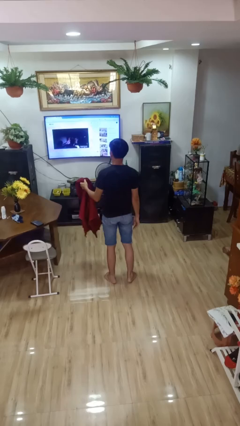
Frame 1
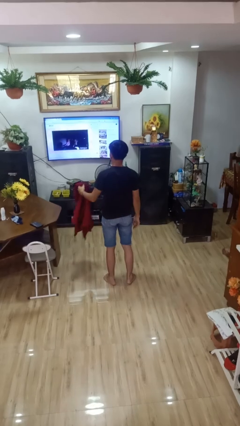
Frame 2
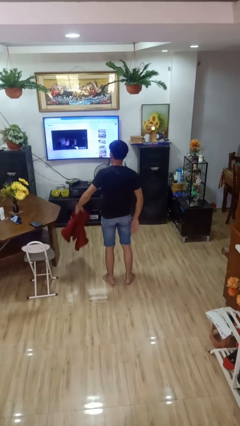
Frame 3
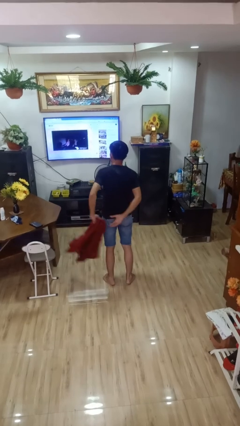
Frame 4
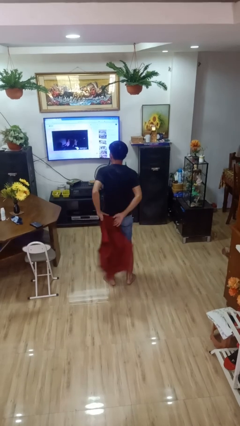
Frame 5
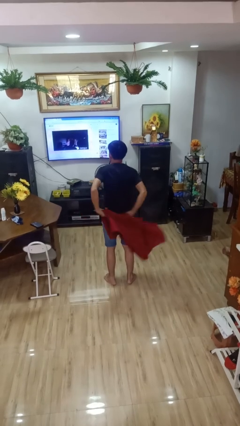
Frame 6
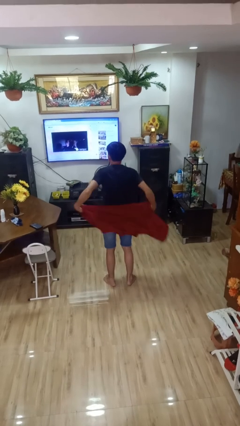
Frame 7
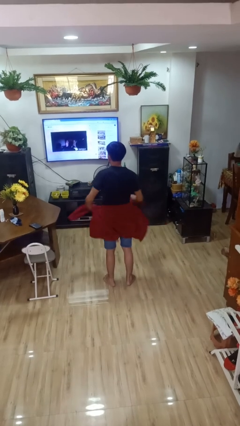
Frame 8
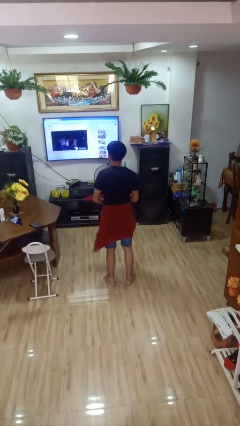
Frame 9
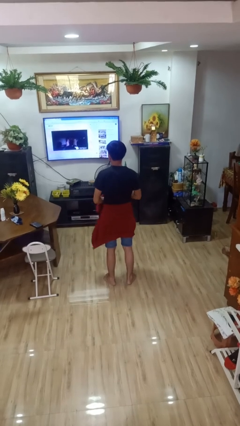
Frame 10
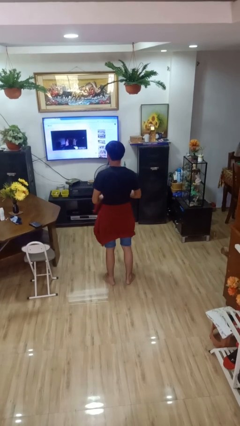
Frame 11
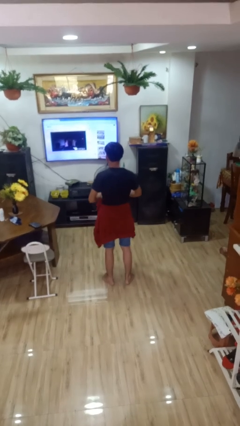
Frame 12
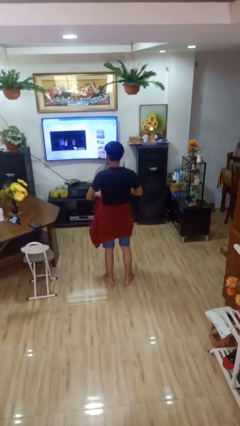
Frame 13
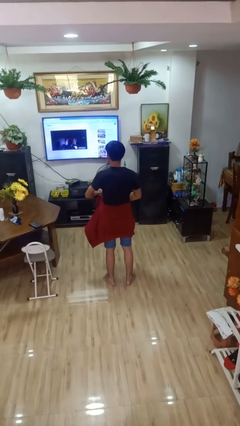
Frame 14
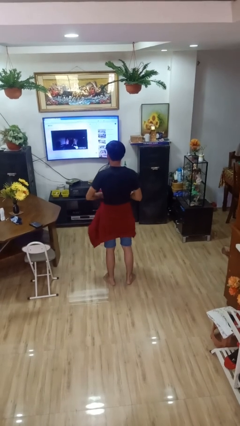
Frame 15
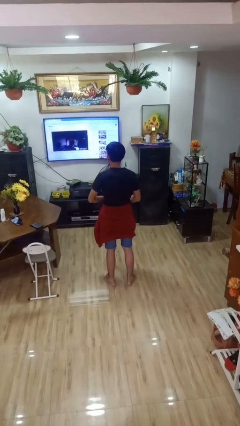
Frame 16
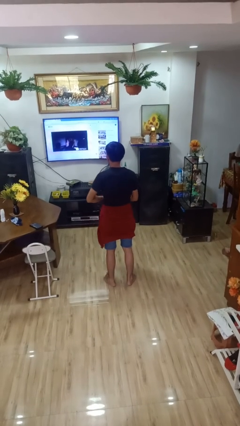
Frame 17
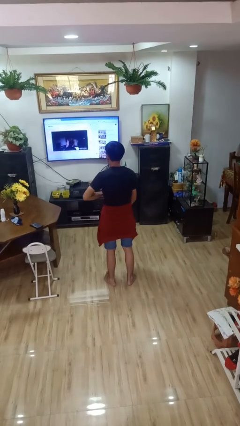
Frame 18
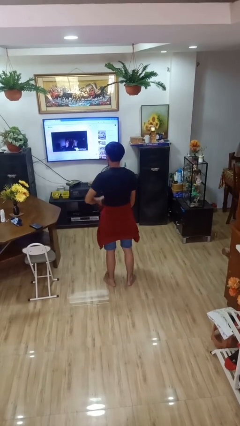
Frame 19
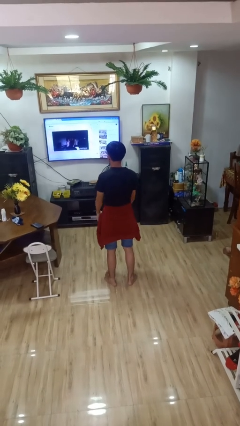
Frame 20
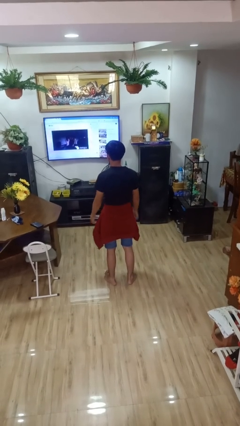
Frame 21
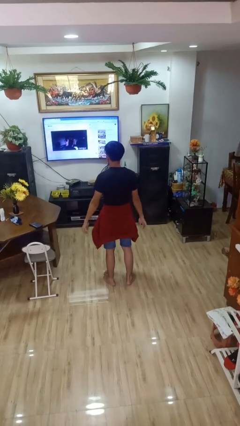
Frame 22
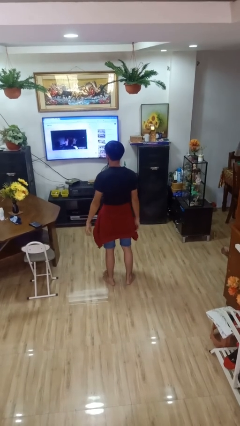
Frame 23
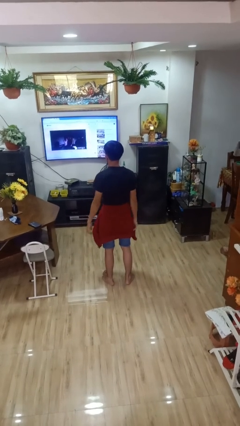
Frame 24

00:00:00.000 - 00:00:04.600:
person ties jacket around waist

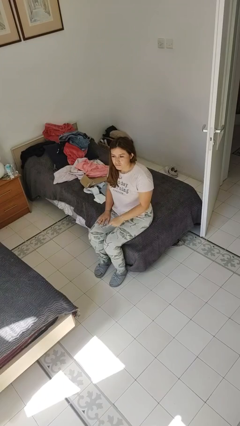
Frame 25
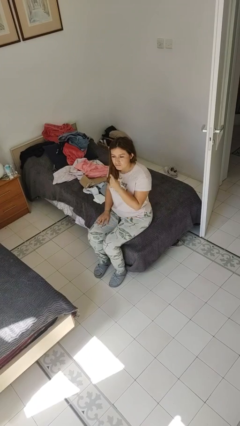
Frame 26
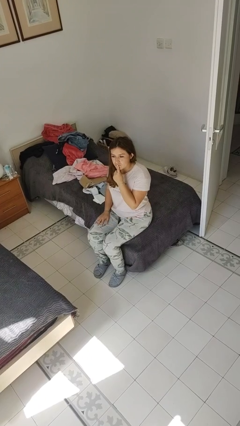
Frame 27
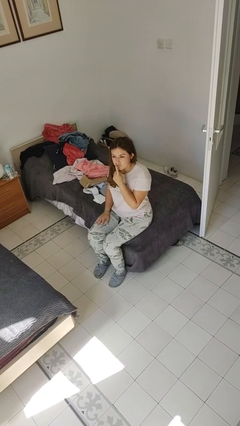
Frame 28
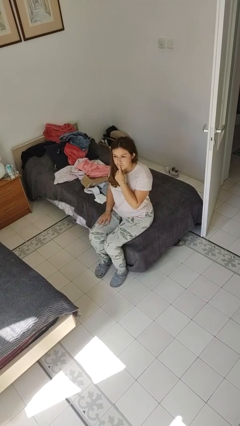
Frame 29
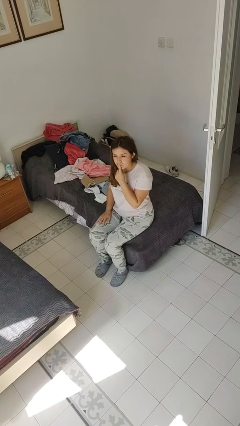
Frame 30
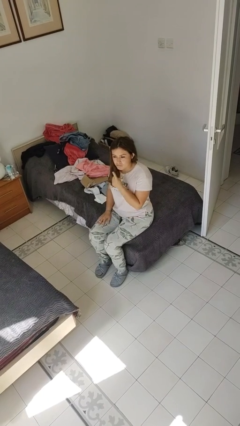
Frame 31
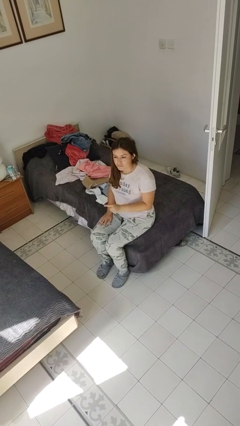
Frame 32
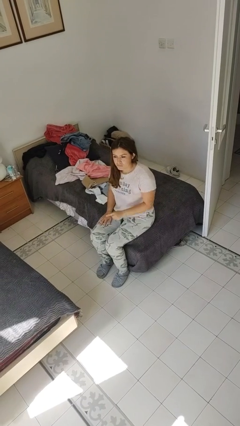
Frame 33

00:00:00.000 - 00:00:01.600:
person gestures be quiet

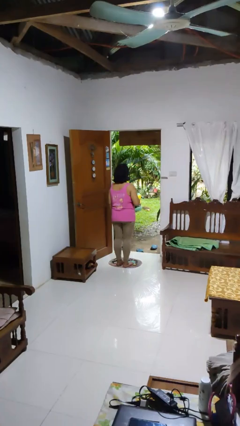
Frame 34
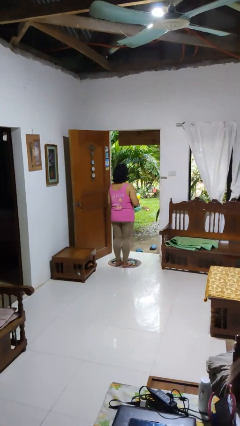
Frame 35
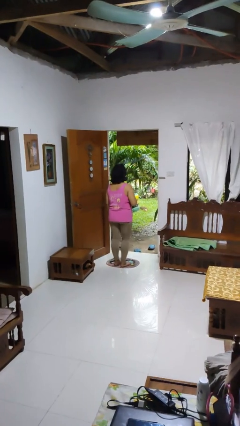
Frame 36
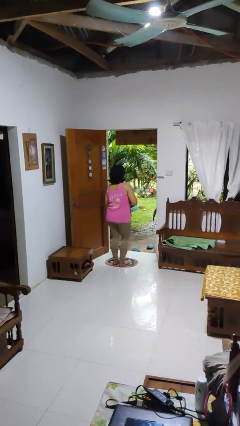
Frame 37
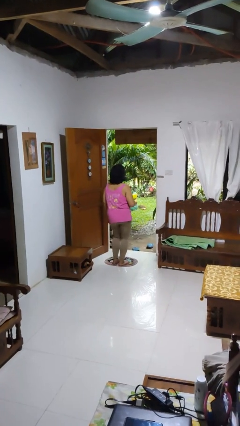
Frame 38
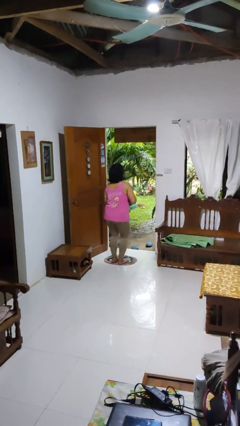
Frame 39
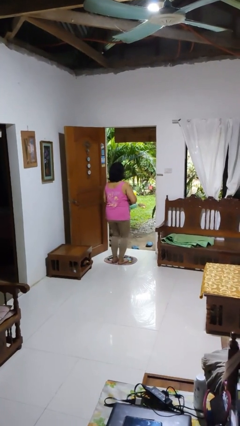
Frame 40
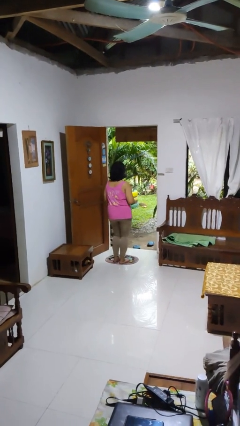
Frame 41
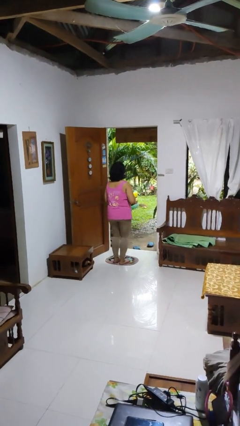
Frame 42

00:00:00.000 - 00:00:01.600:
person wiggles hips

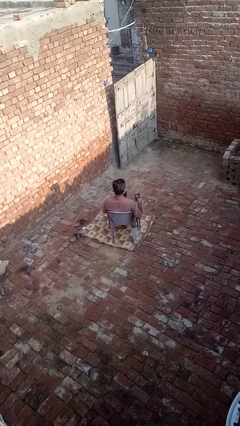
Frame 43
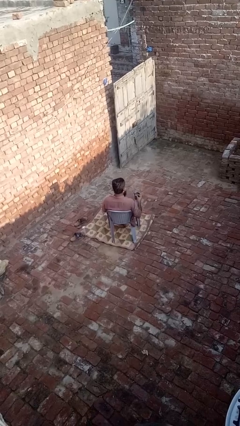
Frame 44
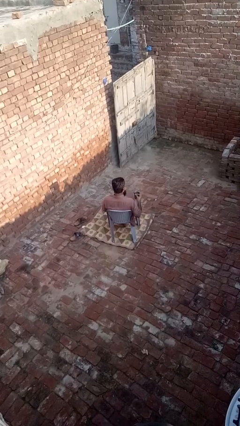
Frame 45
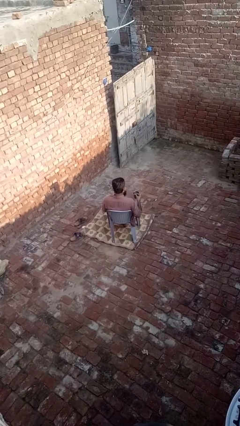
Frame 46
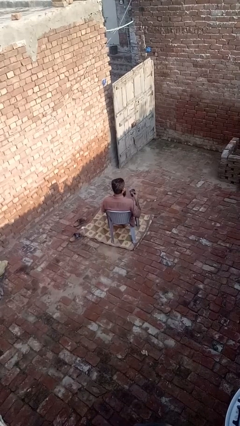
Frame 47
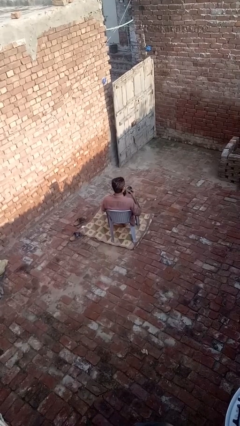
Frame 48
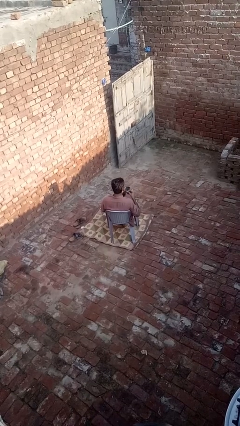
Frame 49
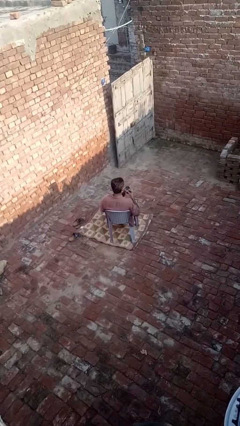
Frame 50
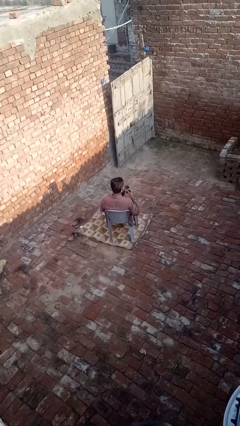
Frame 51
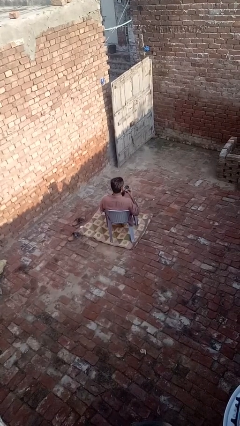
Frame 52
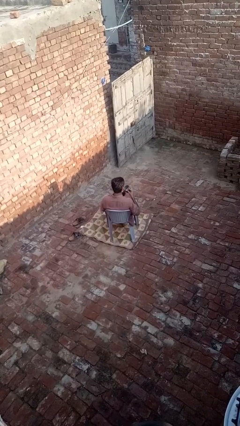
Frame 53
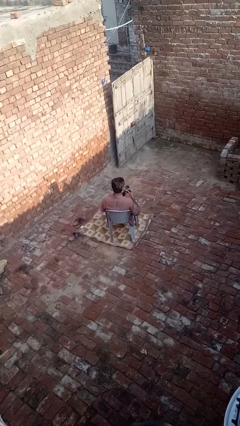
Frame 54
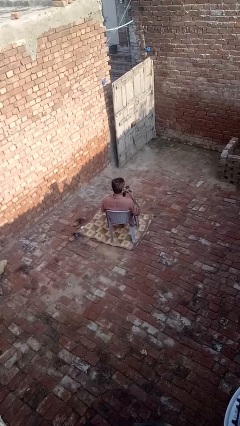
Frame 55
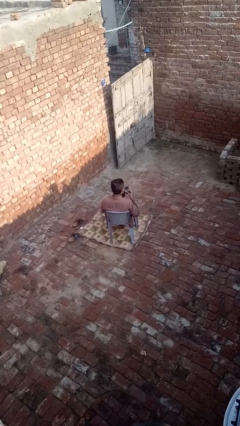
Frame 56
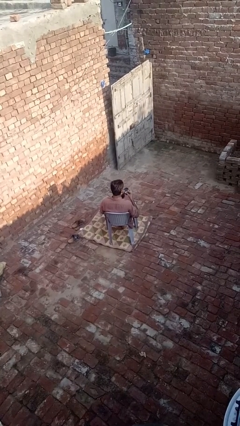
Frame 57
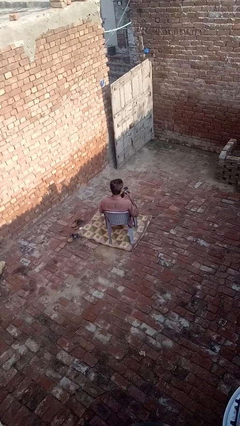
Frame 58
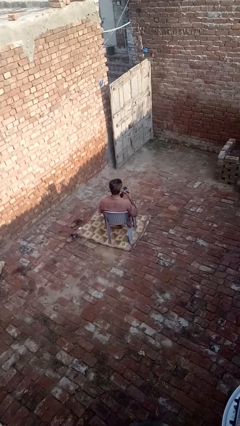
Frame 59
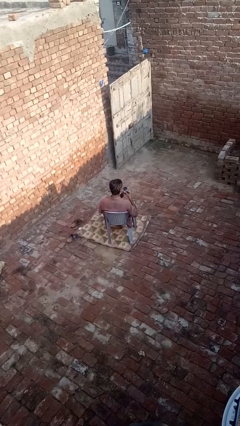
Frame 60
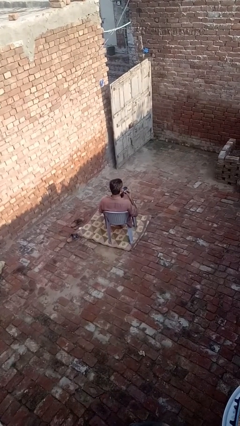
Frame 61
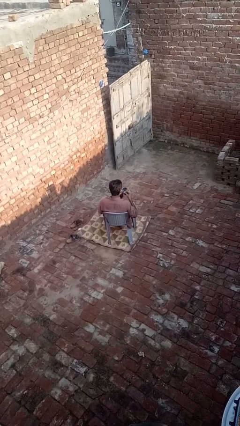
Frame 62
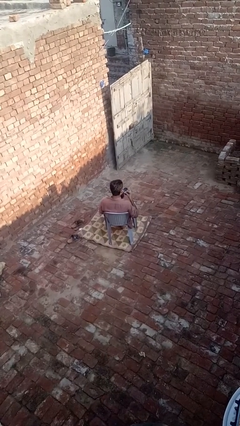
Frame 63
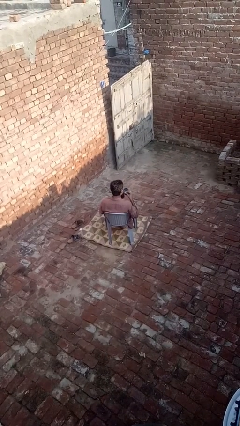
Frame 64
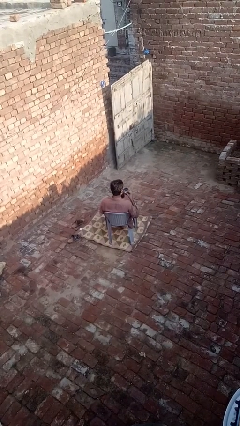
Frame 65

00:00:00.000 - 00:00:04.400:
person drinks from straw

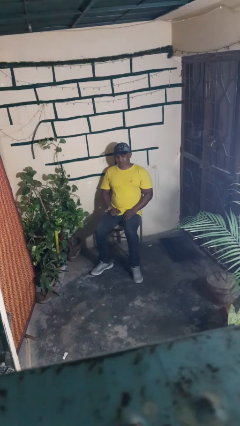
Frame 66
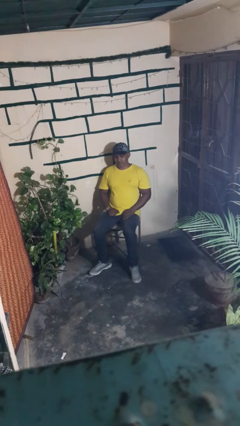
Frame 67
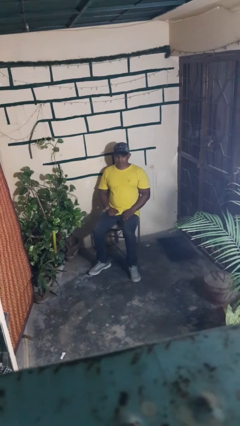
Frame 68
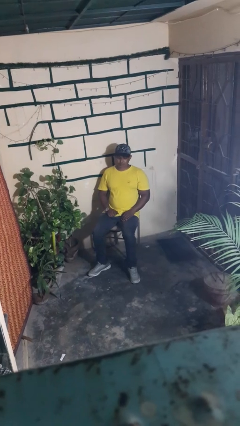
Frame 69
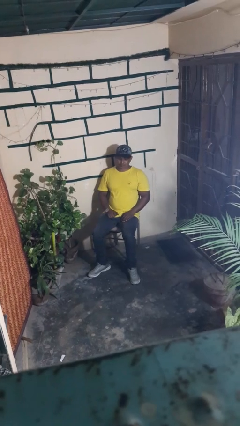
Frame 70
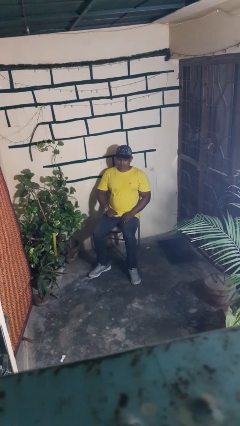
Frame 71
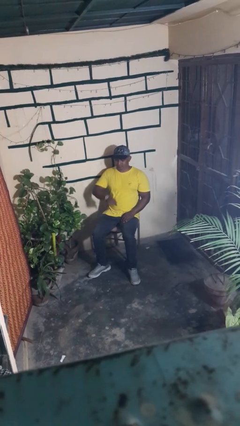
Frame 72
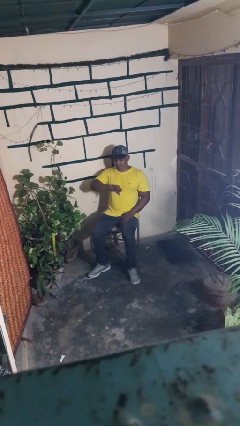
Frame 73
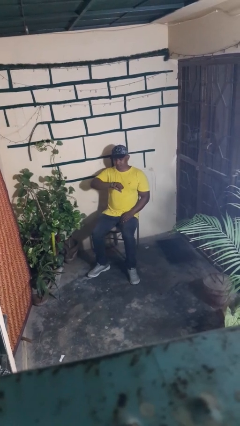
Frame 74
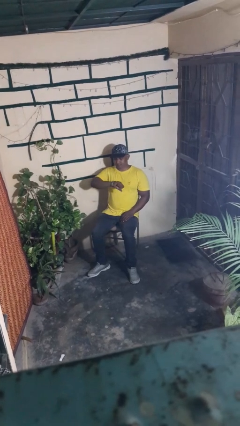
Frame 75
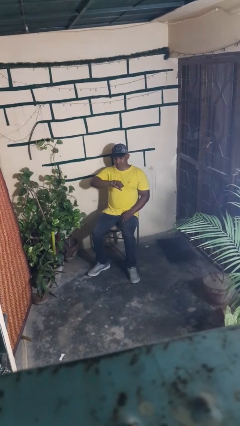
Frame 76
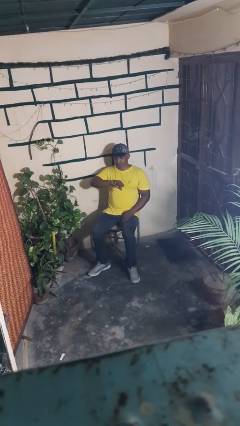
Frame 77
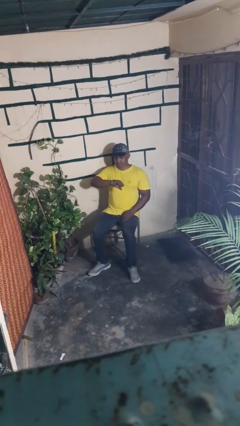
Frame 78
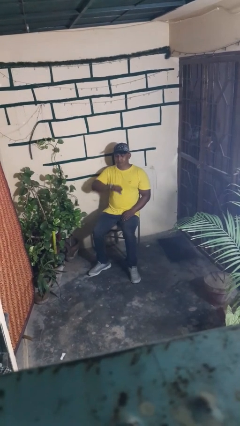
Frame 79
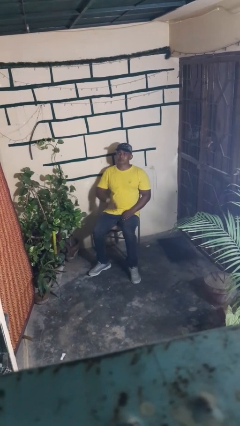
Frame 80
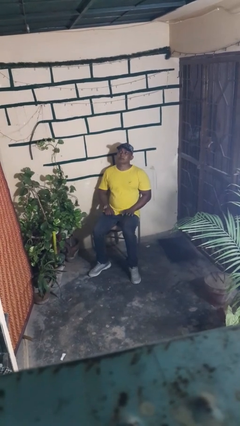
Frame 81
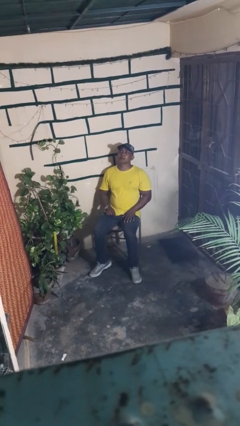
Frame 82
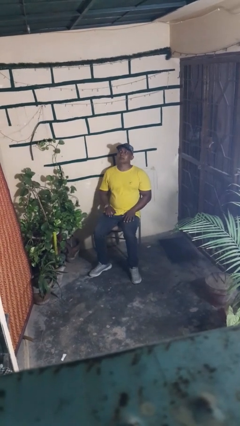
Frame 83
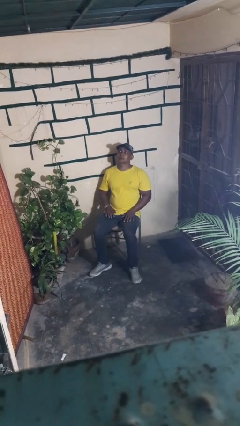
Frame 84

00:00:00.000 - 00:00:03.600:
person looks at wristwatch

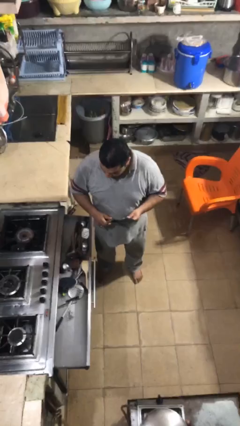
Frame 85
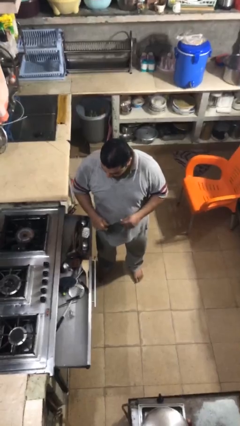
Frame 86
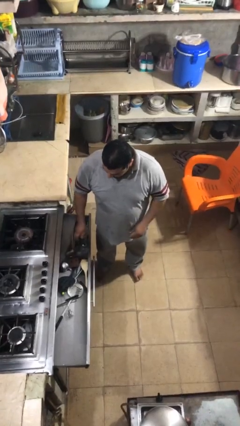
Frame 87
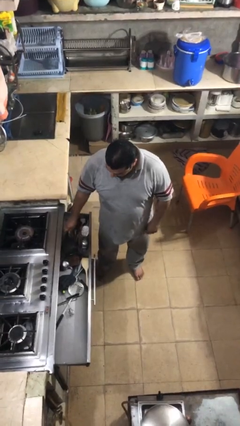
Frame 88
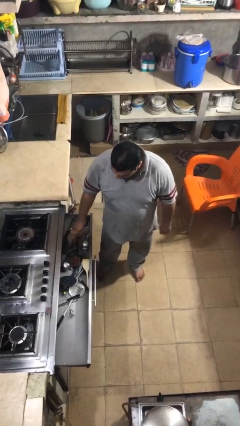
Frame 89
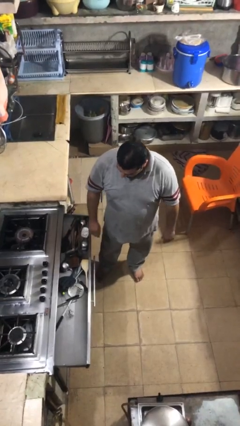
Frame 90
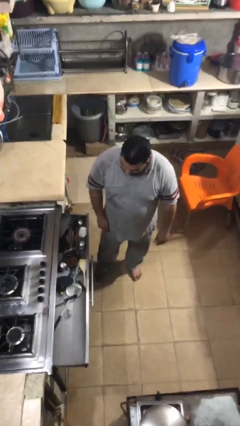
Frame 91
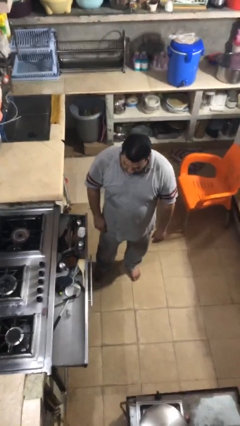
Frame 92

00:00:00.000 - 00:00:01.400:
person puts object into kitchen drawer

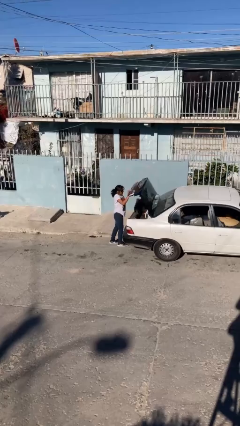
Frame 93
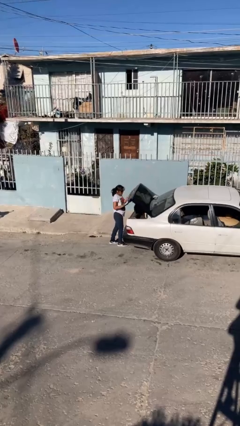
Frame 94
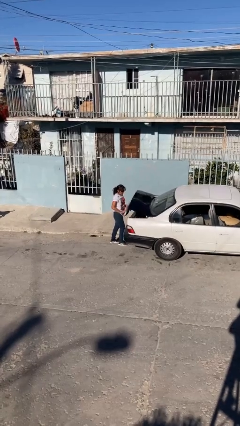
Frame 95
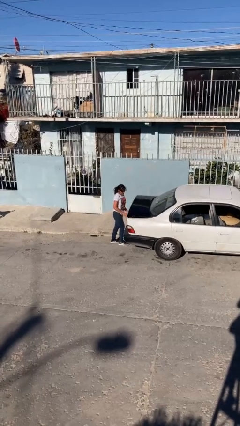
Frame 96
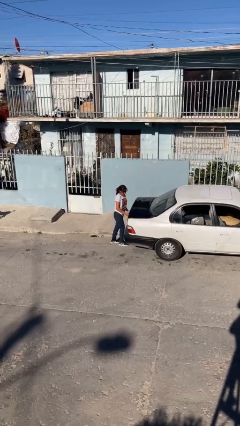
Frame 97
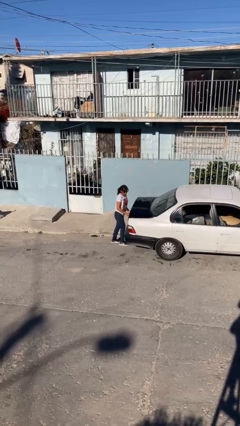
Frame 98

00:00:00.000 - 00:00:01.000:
person closes car trunk
